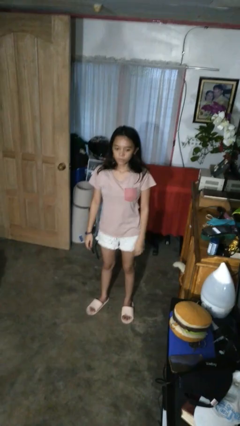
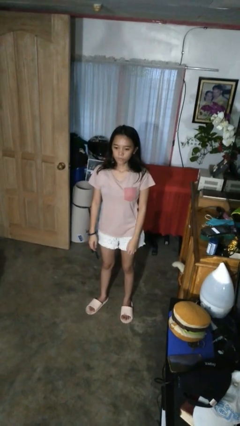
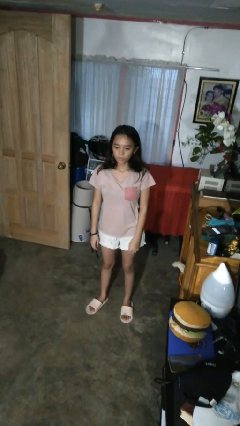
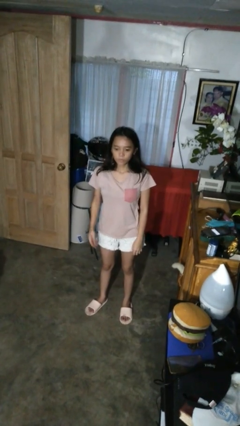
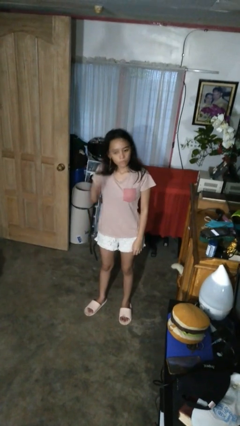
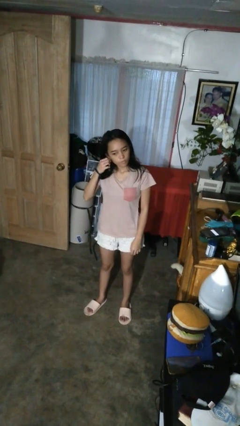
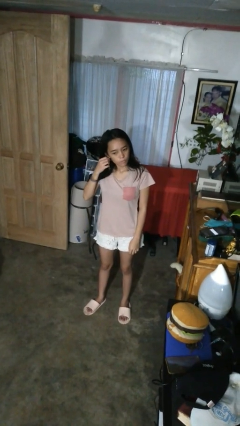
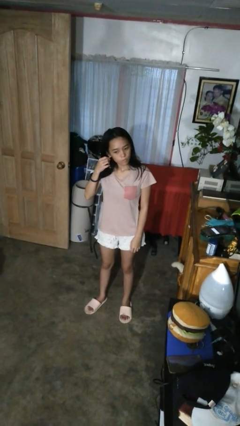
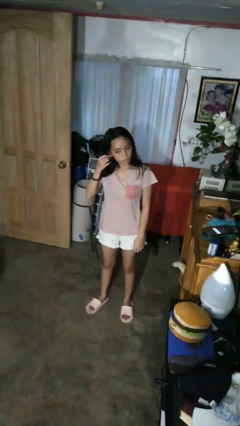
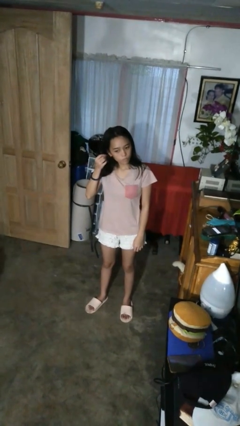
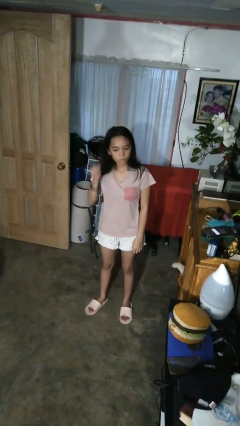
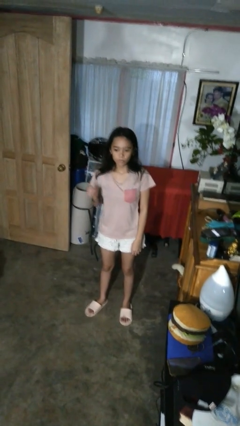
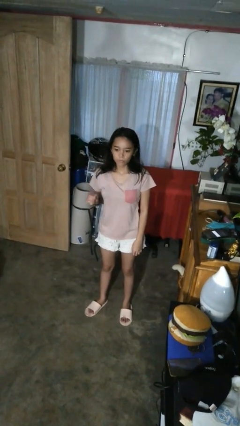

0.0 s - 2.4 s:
person takes off earrings

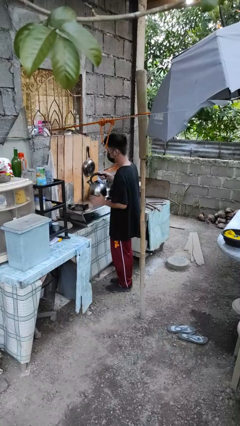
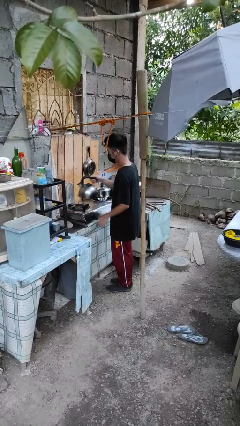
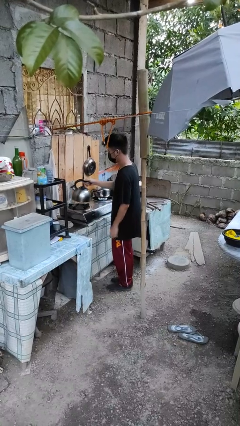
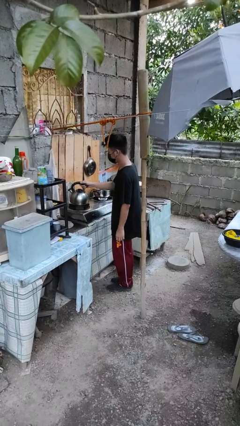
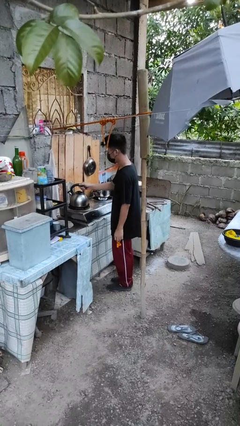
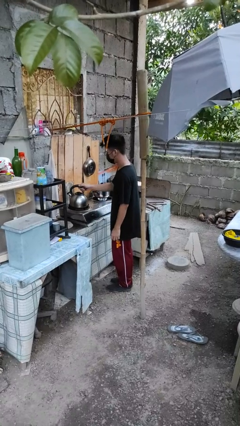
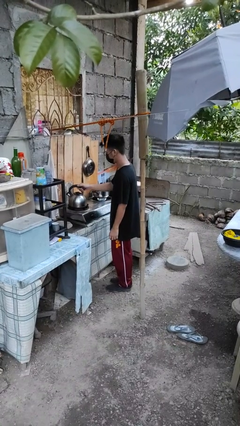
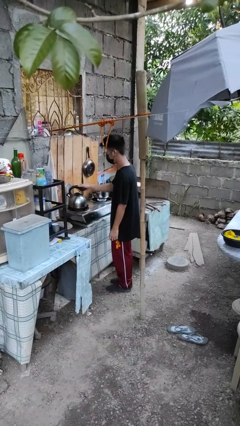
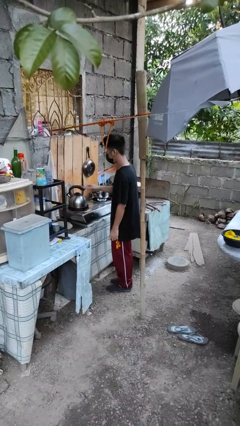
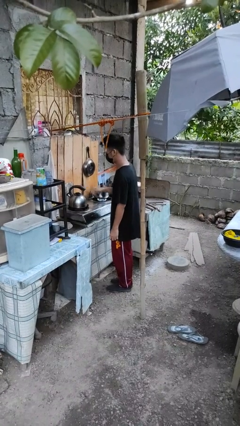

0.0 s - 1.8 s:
person puts down object on countertop

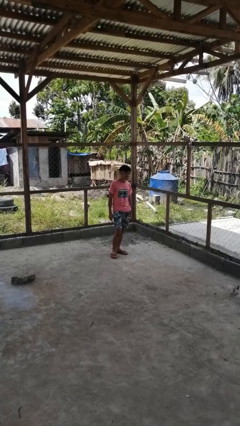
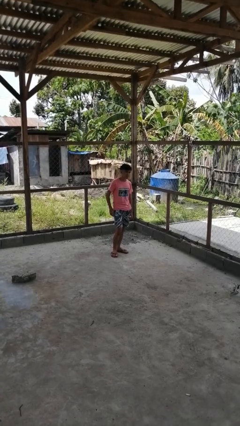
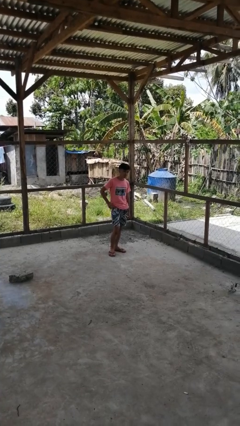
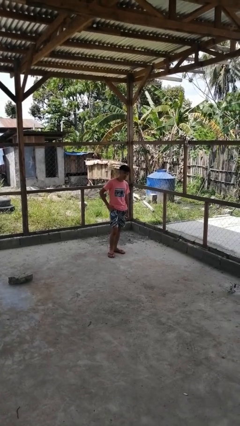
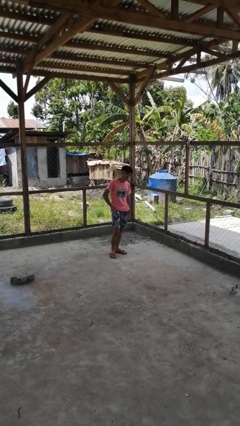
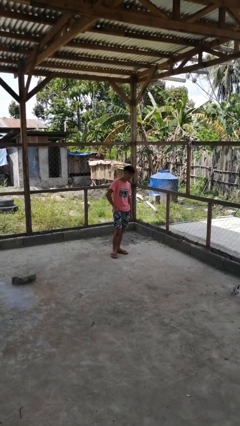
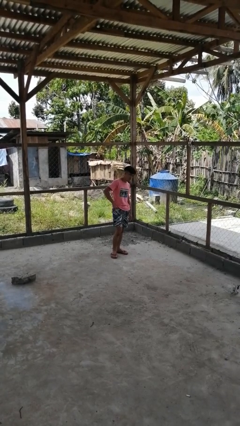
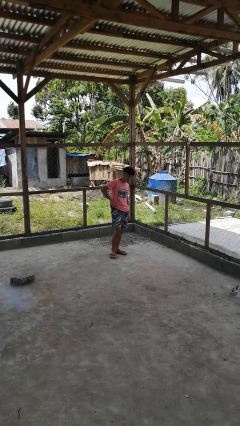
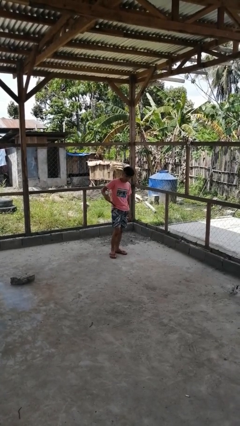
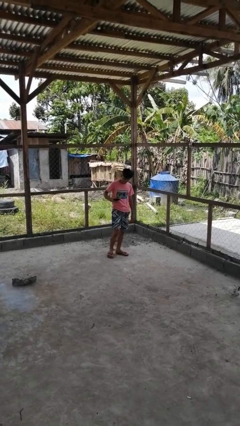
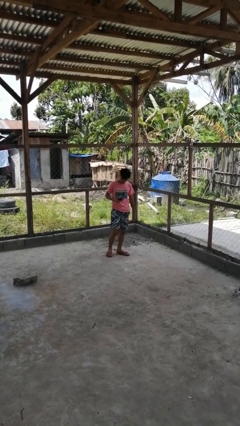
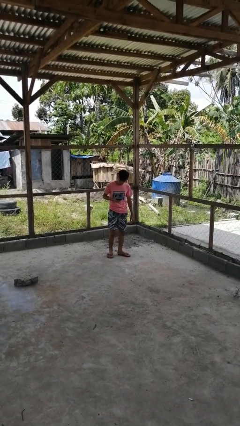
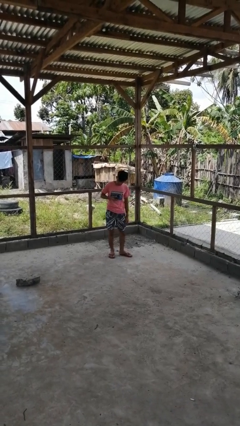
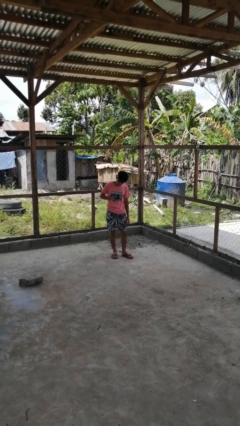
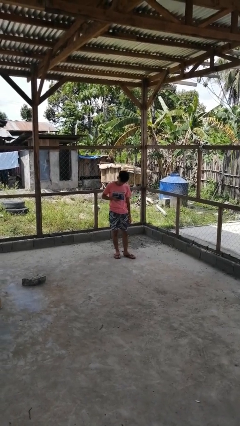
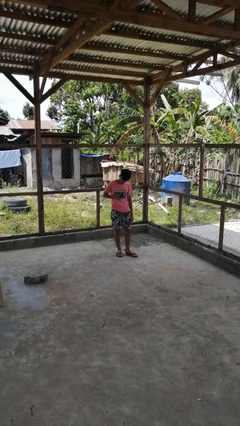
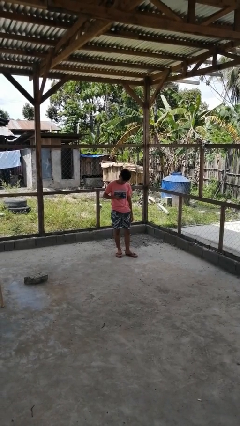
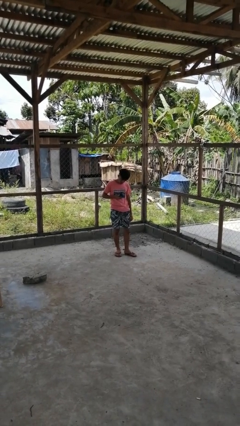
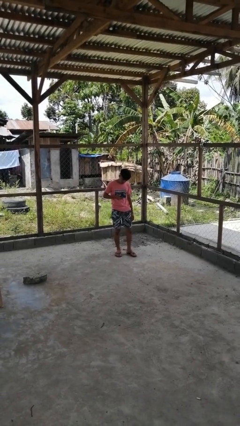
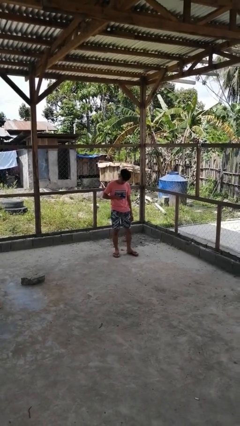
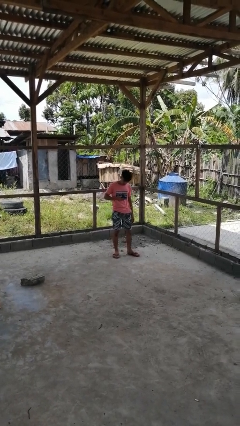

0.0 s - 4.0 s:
person takes phone from pocket

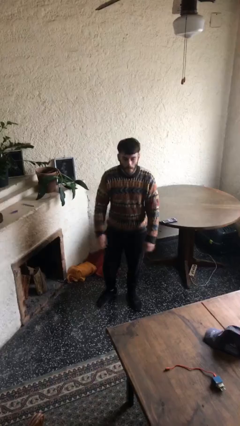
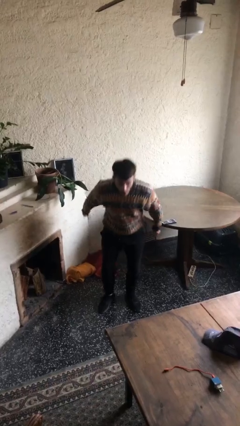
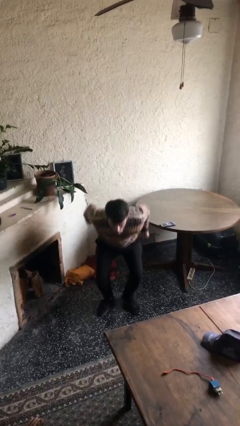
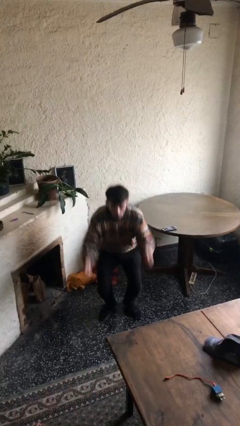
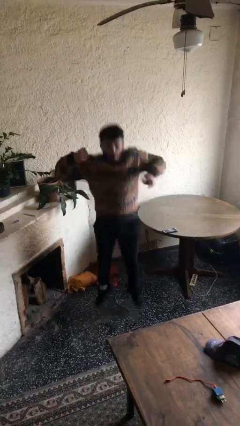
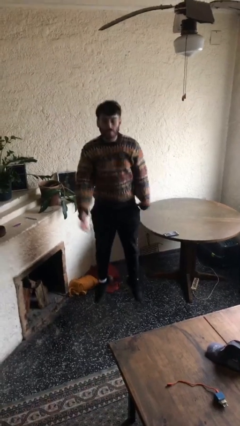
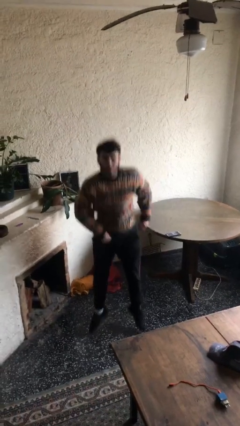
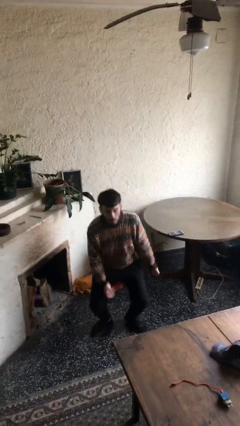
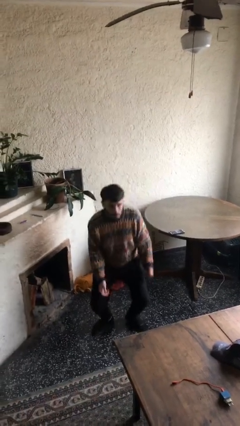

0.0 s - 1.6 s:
person jumps

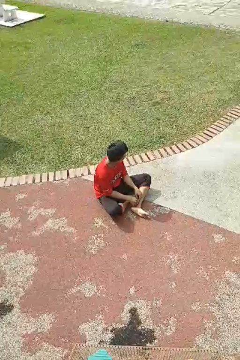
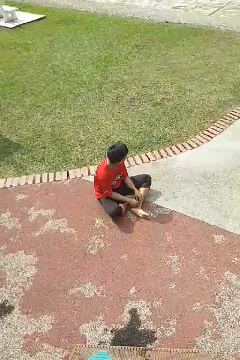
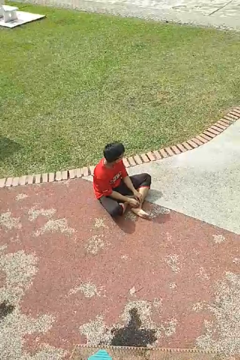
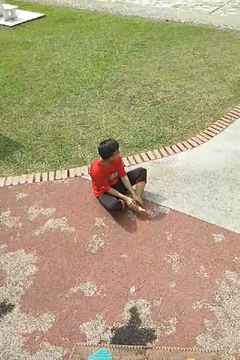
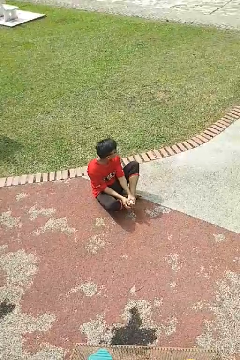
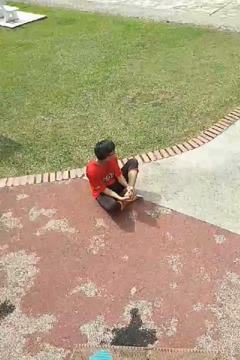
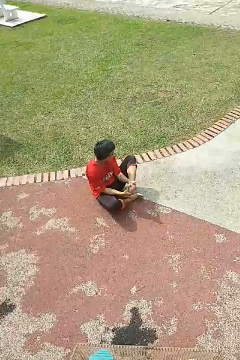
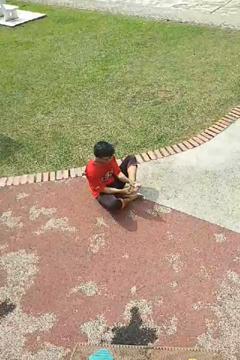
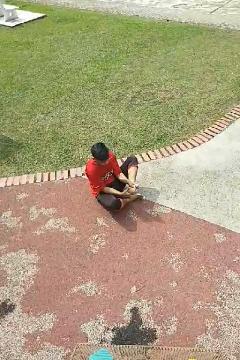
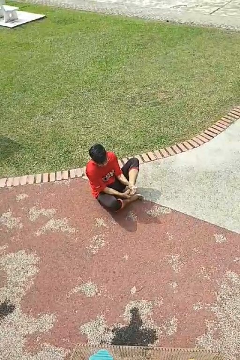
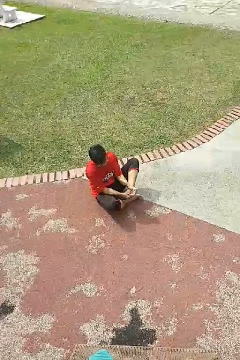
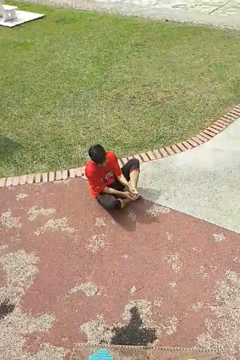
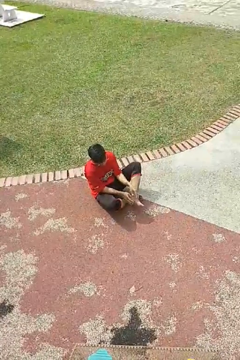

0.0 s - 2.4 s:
person rubs foot

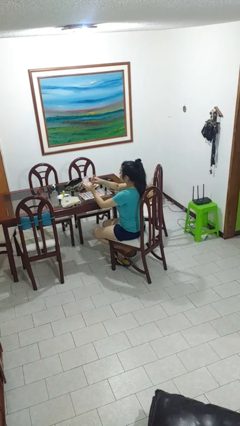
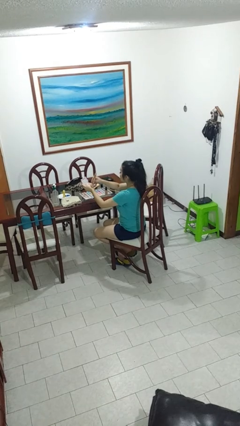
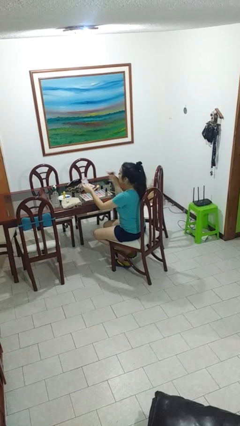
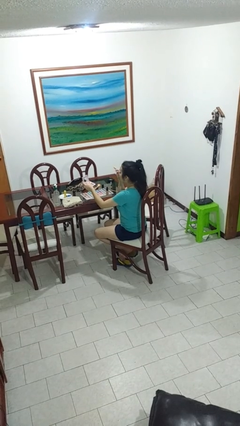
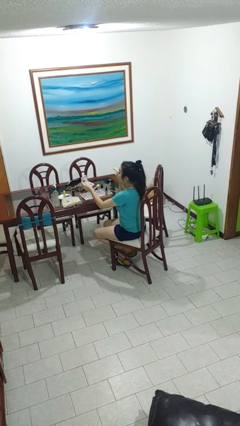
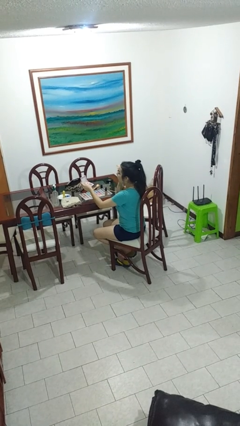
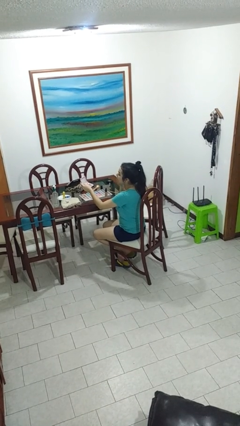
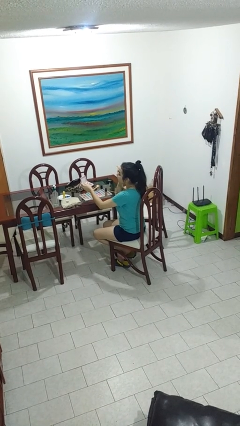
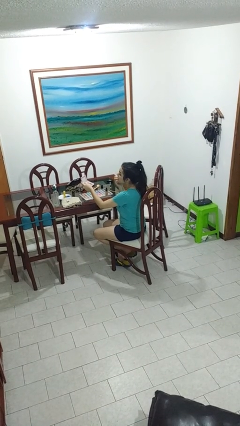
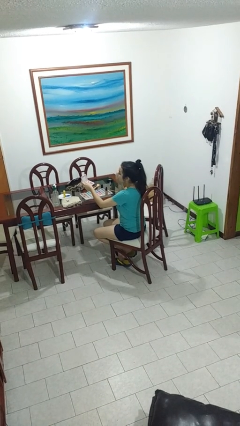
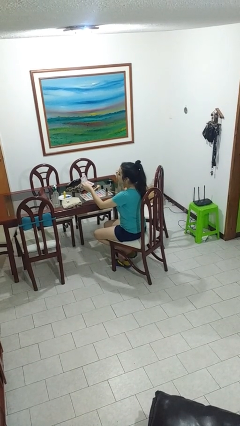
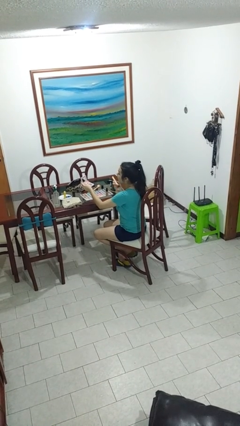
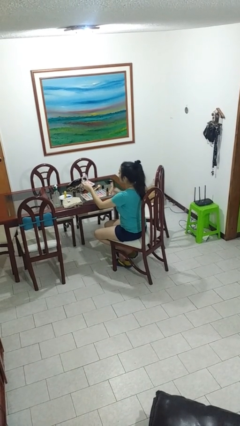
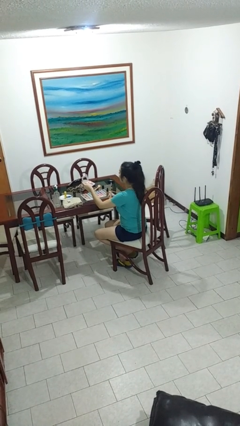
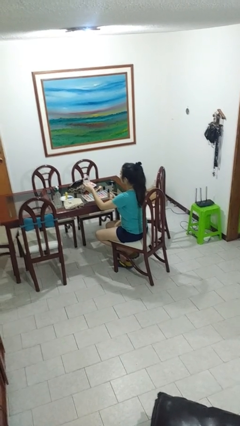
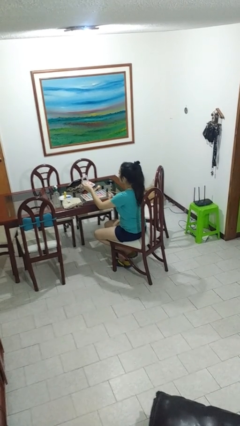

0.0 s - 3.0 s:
person applies foundation makeup

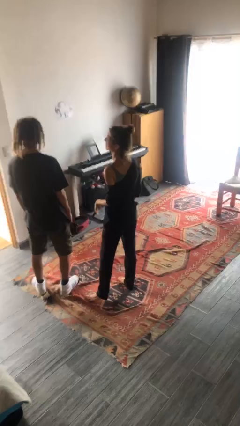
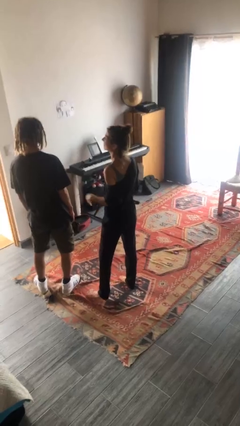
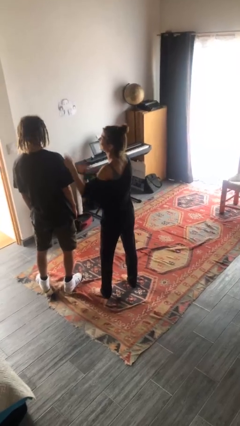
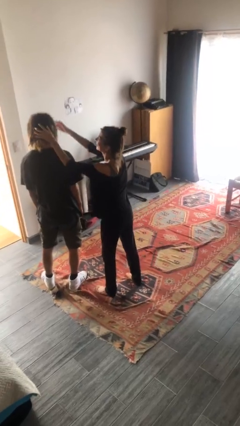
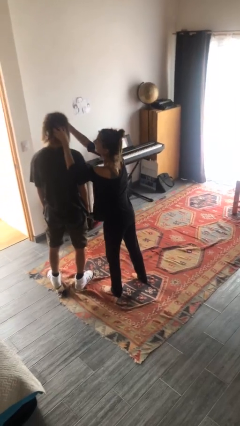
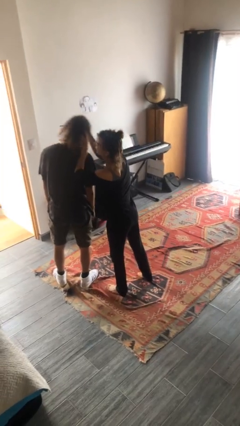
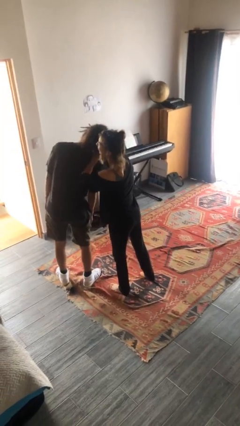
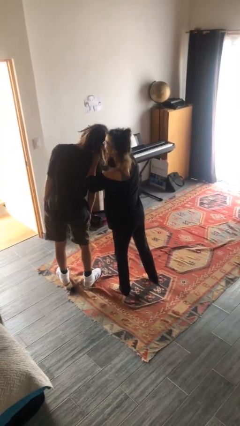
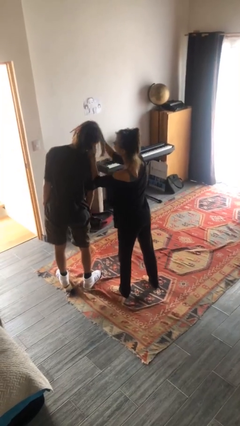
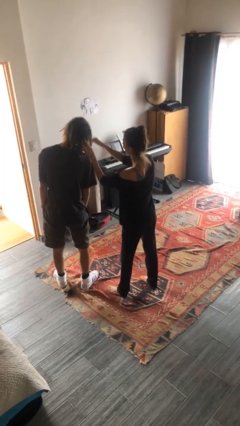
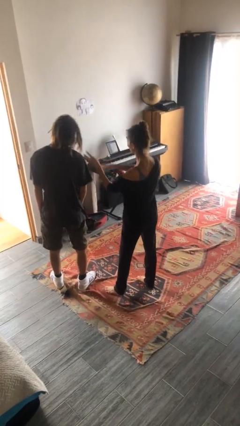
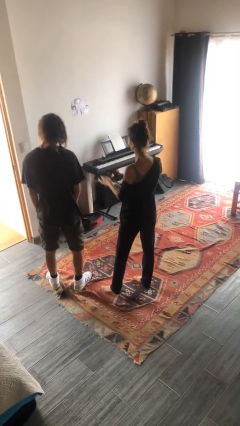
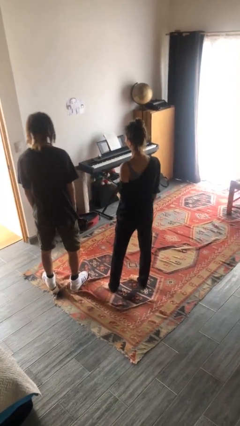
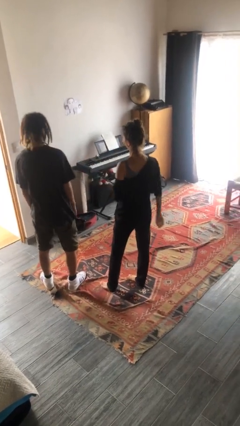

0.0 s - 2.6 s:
person grabs person by hair
